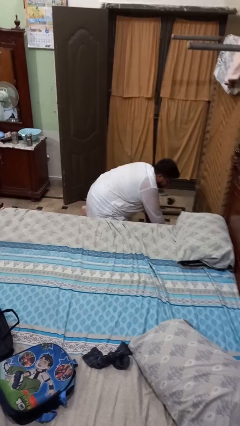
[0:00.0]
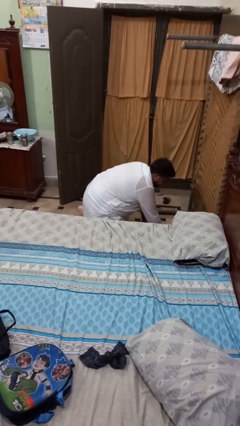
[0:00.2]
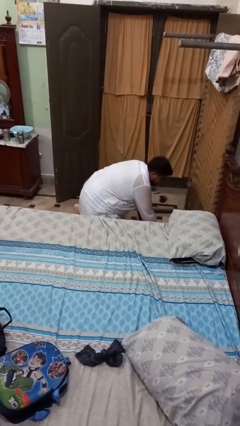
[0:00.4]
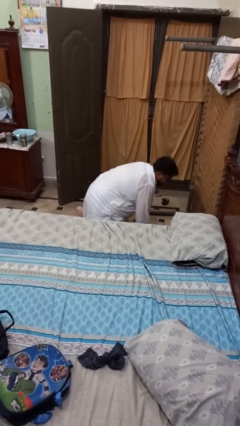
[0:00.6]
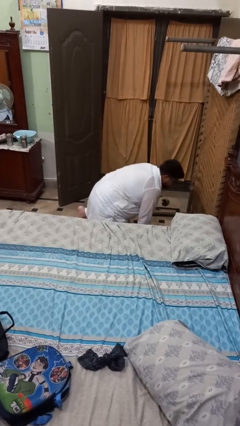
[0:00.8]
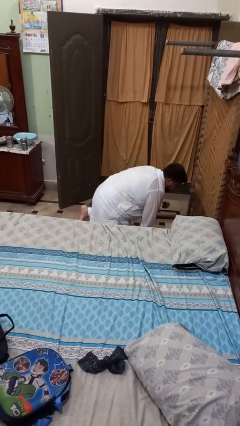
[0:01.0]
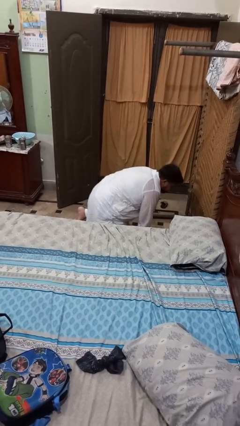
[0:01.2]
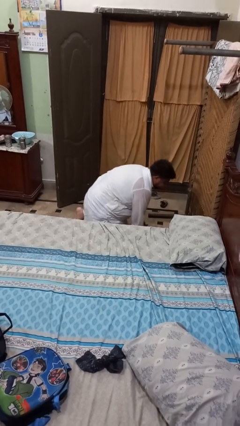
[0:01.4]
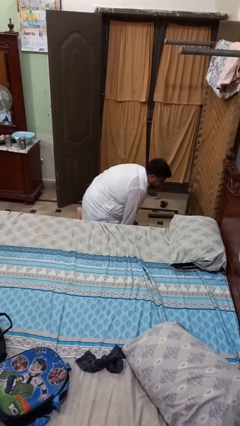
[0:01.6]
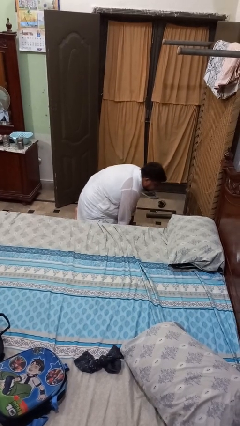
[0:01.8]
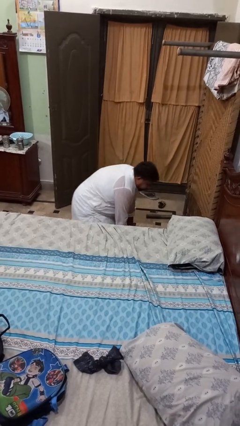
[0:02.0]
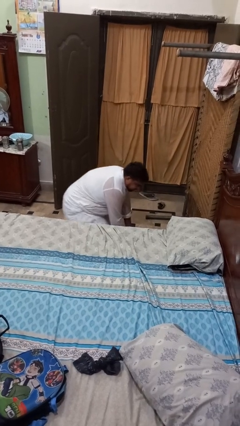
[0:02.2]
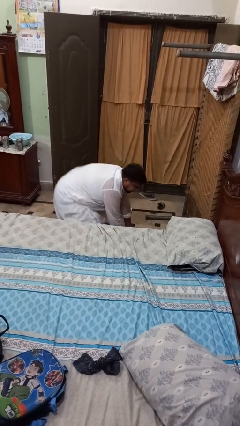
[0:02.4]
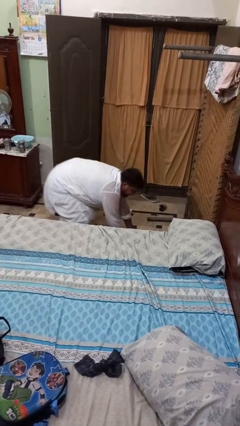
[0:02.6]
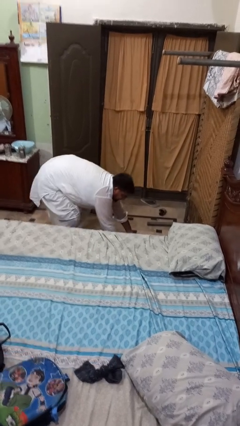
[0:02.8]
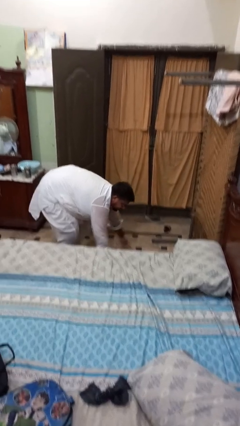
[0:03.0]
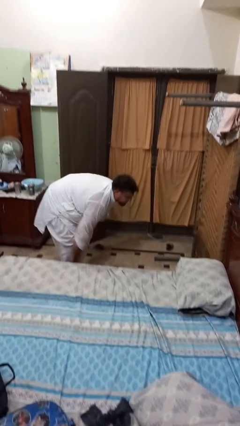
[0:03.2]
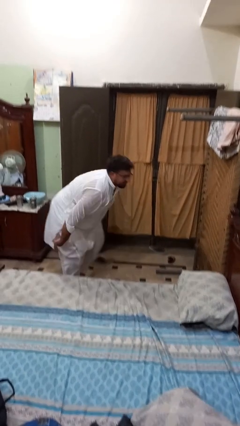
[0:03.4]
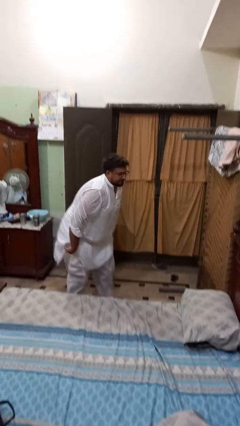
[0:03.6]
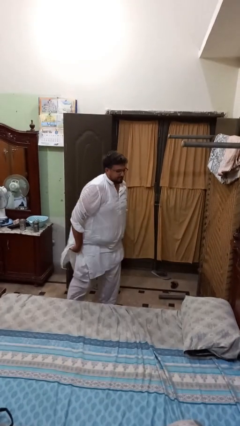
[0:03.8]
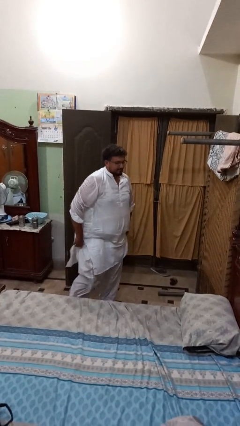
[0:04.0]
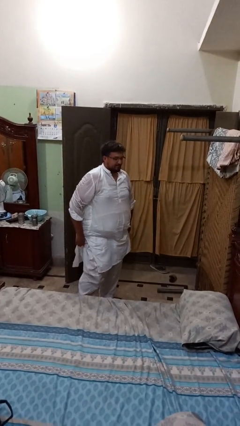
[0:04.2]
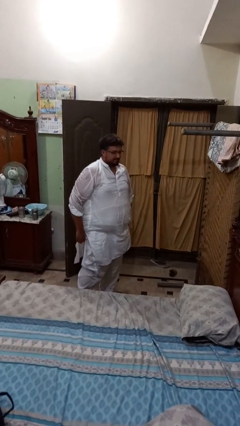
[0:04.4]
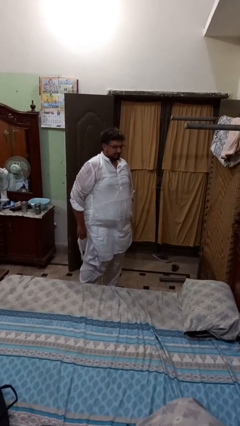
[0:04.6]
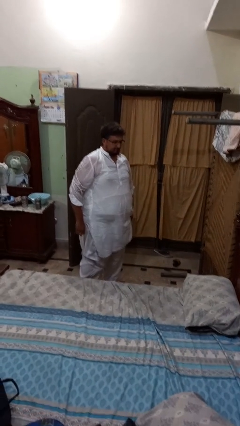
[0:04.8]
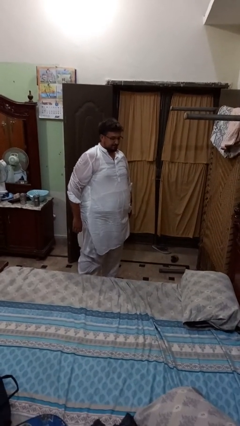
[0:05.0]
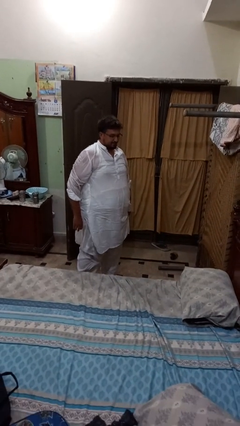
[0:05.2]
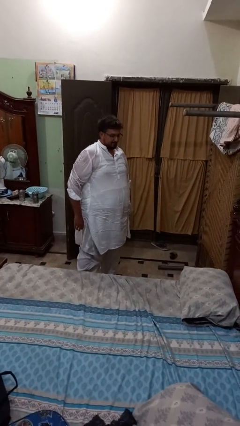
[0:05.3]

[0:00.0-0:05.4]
person stands up from floor

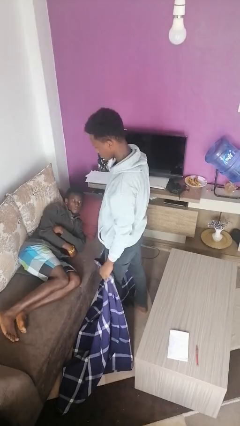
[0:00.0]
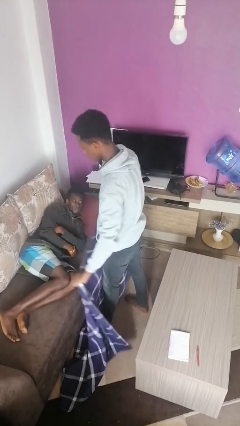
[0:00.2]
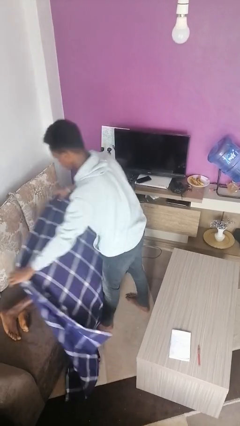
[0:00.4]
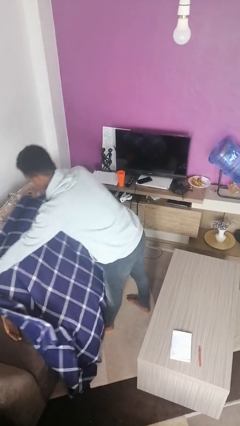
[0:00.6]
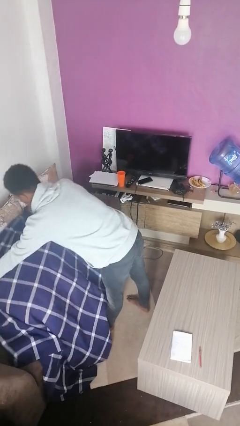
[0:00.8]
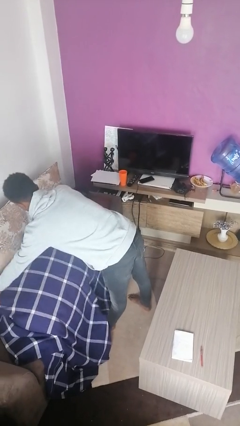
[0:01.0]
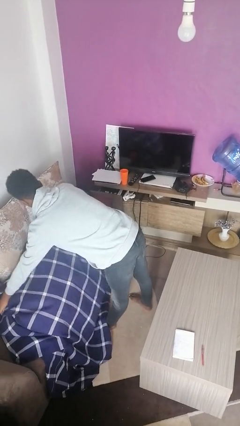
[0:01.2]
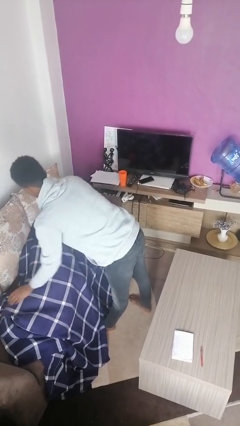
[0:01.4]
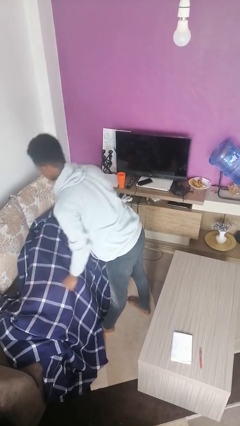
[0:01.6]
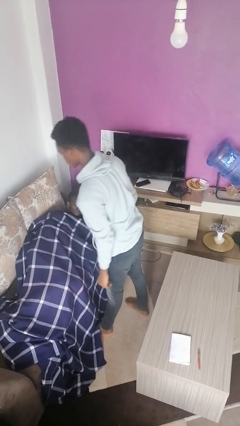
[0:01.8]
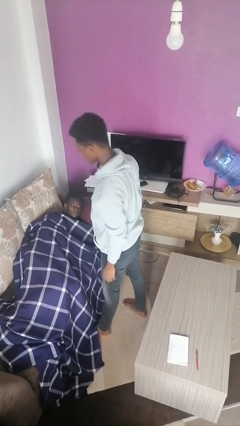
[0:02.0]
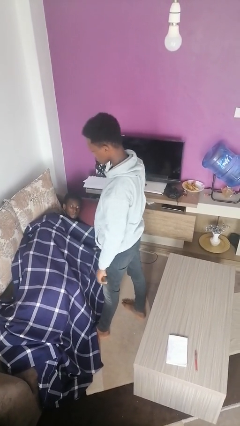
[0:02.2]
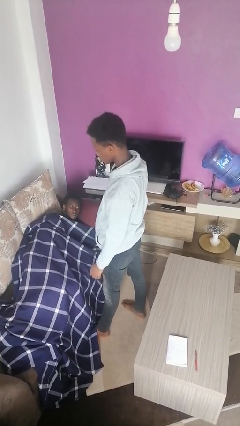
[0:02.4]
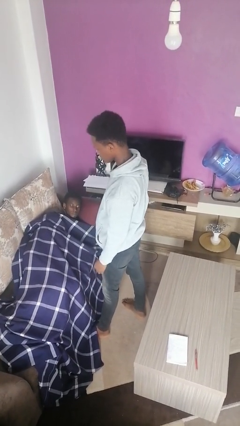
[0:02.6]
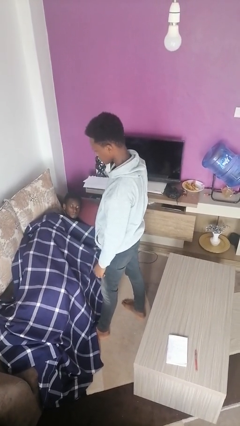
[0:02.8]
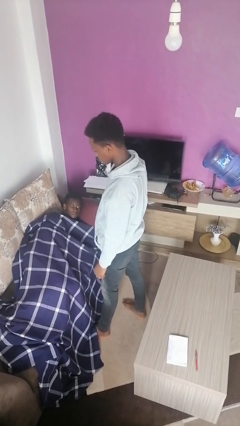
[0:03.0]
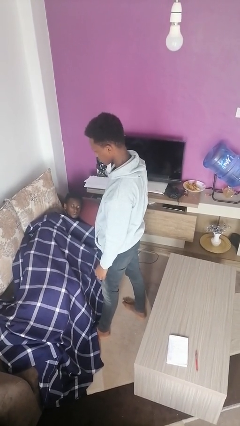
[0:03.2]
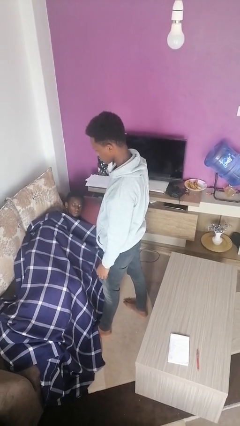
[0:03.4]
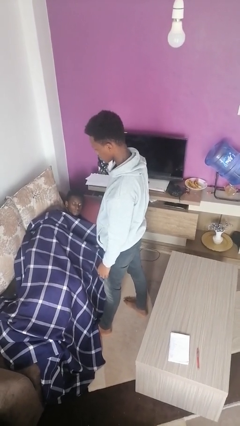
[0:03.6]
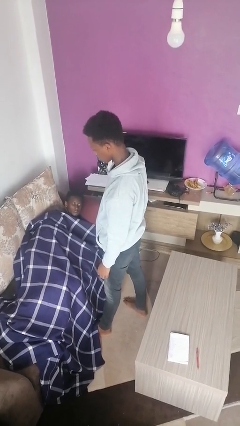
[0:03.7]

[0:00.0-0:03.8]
person covers friend with blanket

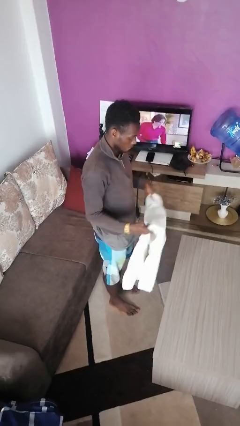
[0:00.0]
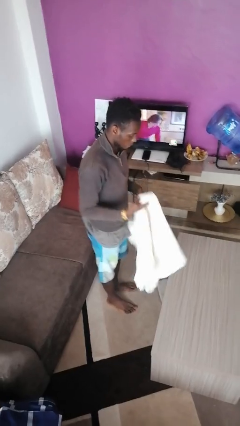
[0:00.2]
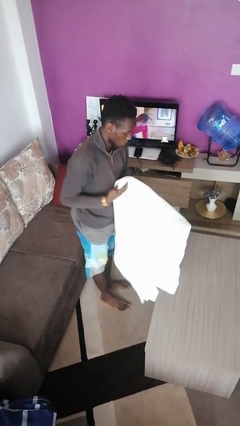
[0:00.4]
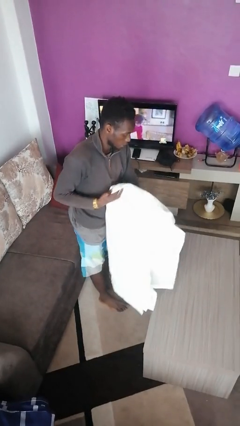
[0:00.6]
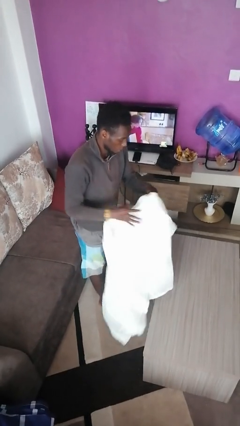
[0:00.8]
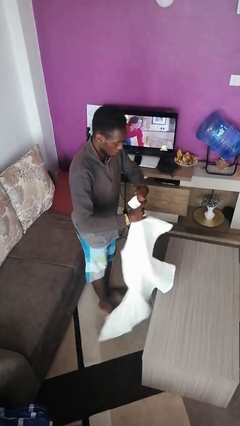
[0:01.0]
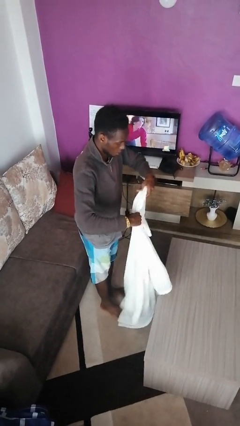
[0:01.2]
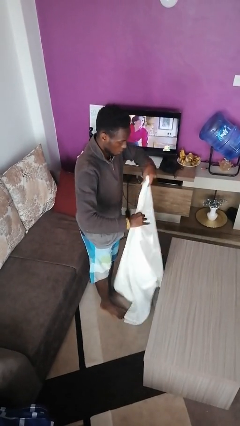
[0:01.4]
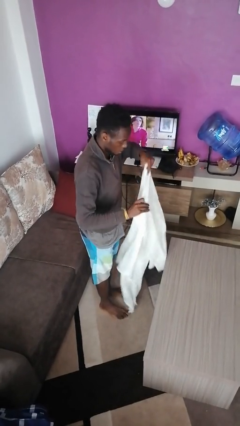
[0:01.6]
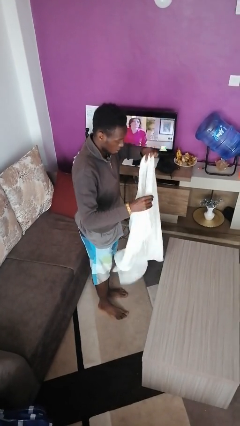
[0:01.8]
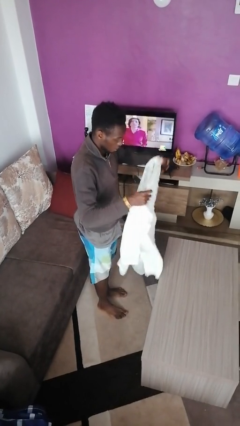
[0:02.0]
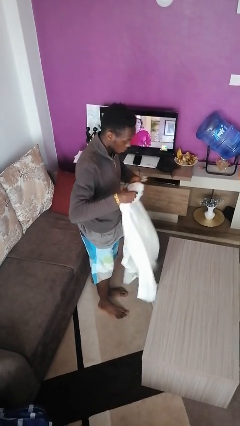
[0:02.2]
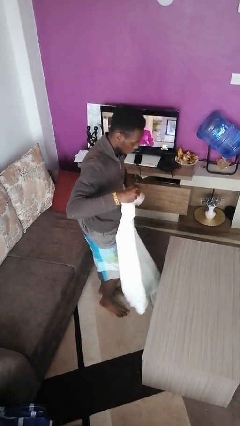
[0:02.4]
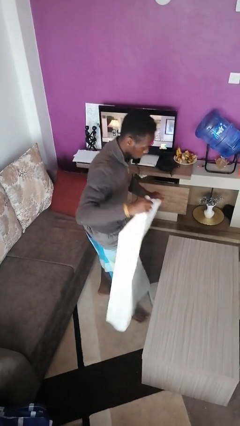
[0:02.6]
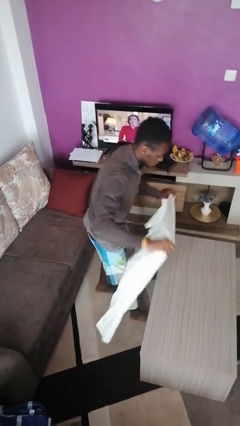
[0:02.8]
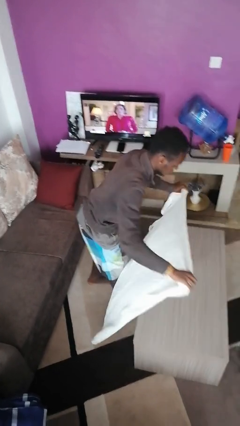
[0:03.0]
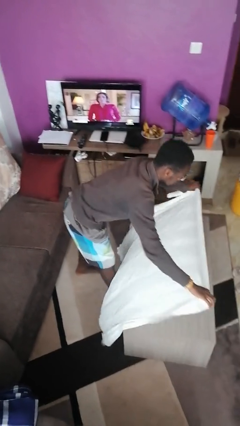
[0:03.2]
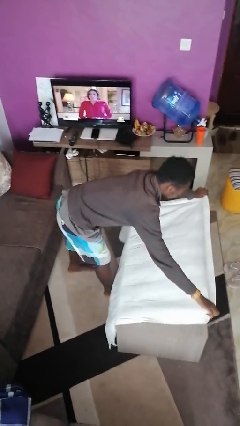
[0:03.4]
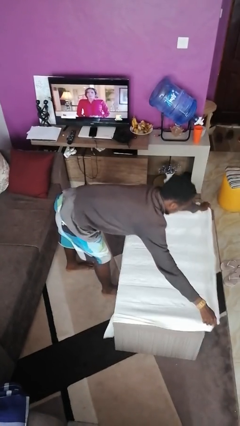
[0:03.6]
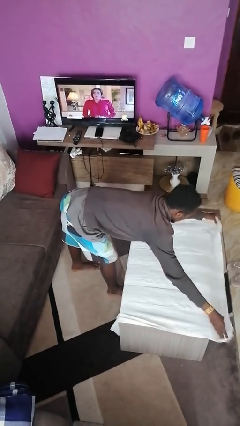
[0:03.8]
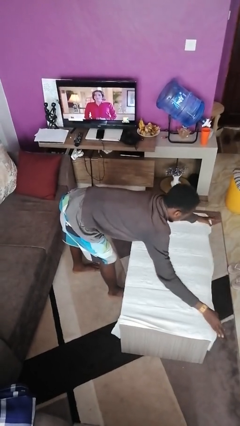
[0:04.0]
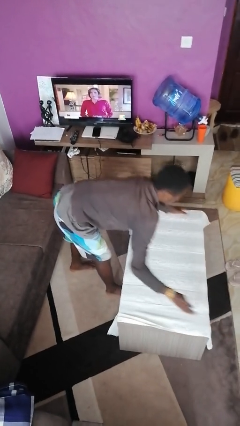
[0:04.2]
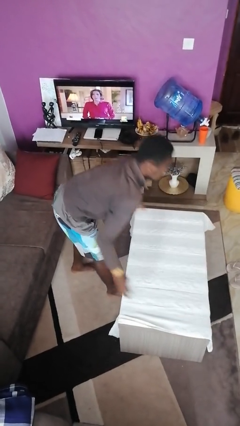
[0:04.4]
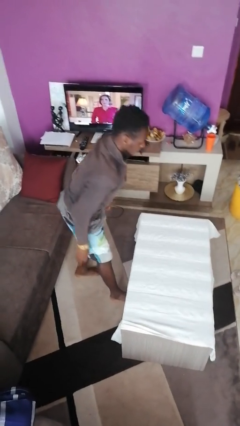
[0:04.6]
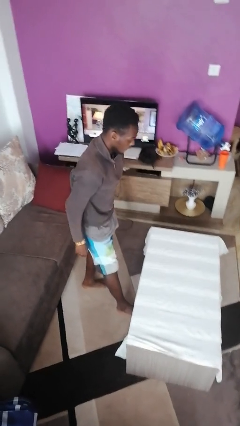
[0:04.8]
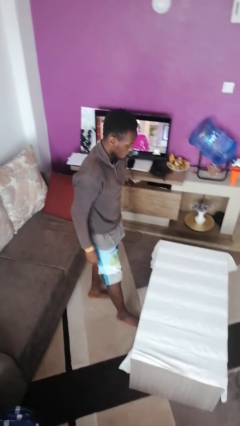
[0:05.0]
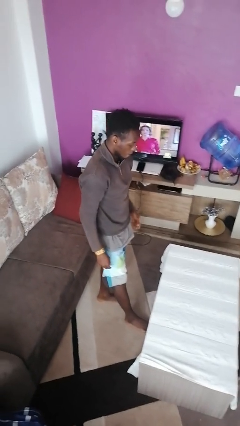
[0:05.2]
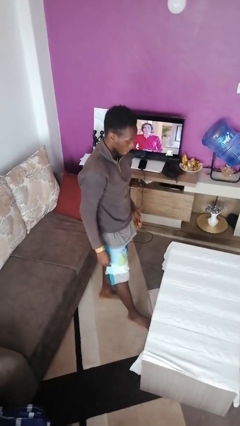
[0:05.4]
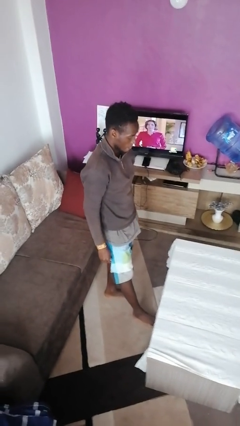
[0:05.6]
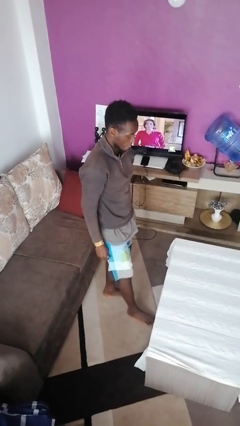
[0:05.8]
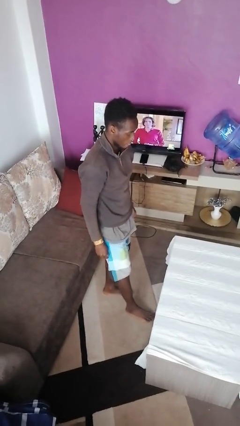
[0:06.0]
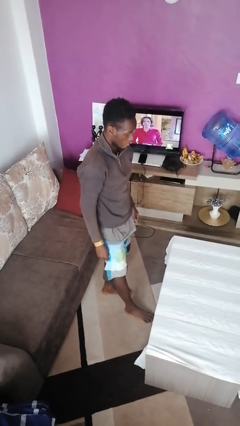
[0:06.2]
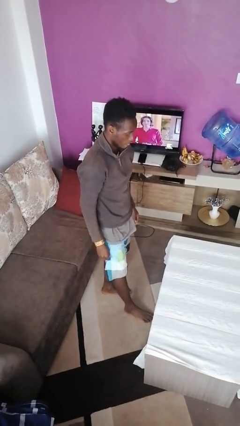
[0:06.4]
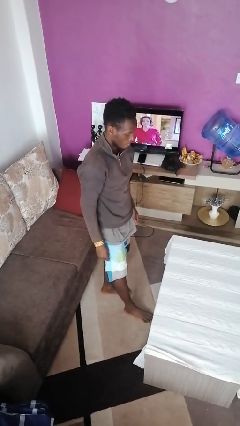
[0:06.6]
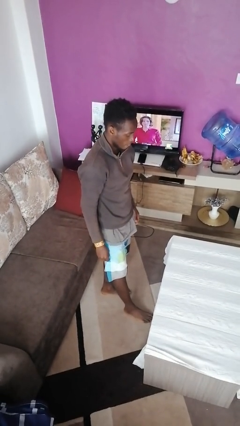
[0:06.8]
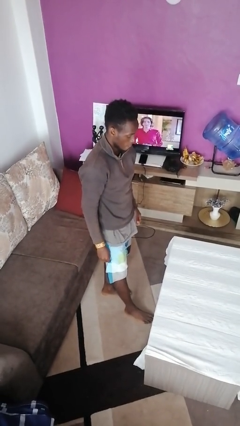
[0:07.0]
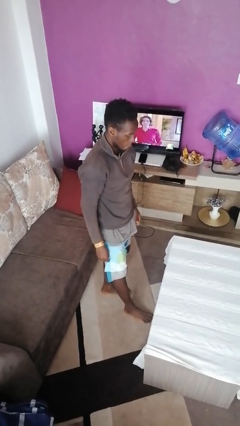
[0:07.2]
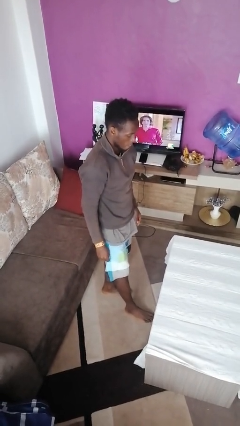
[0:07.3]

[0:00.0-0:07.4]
person spreads tablecloth

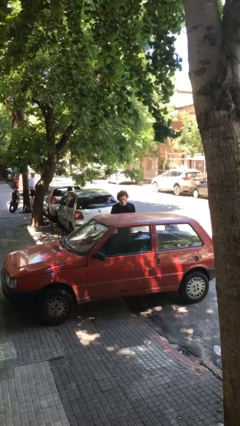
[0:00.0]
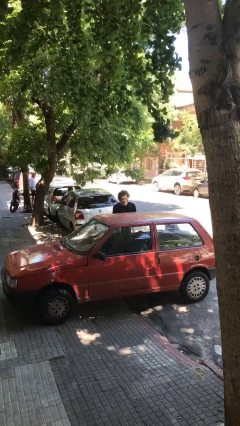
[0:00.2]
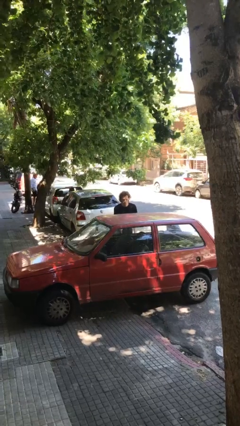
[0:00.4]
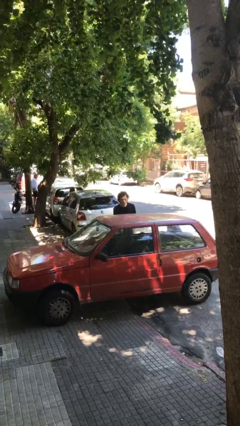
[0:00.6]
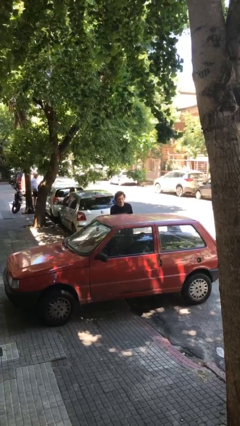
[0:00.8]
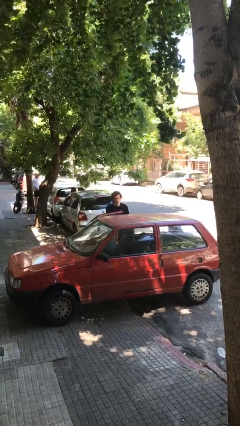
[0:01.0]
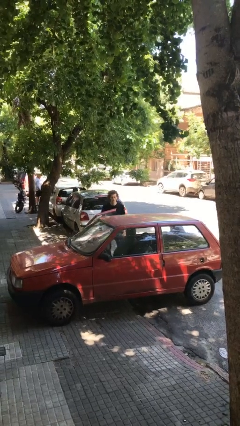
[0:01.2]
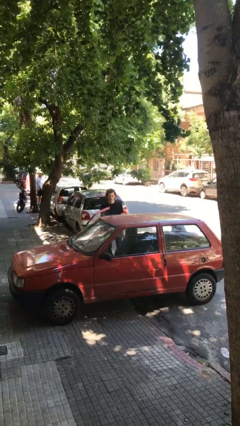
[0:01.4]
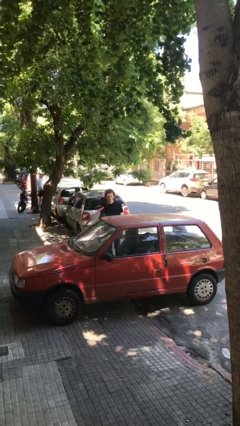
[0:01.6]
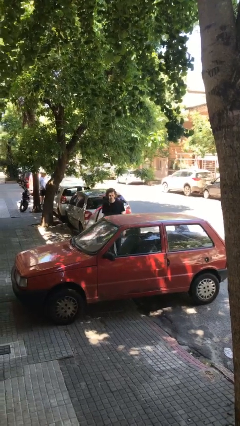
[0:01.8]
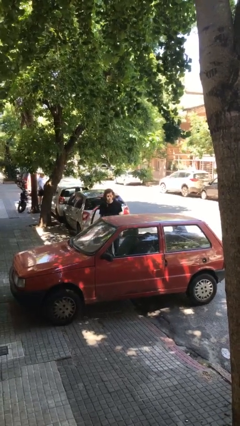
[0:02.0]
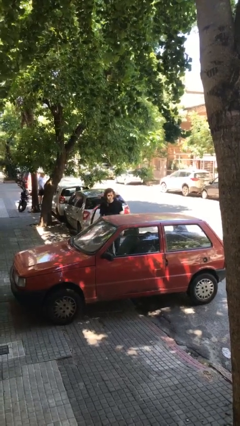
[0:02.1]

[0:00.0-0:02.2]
person opens car door
